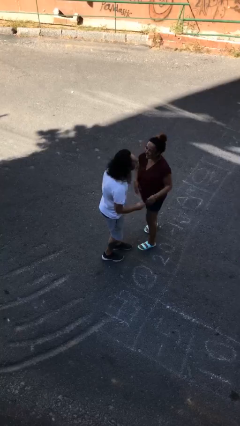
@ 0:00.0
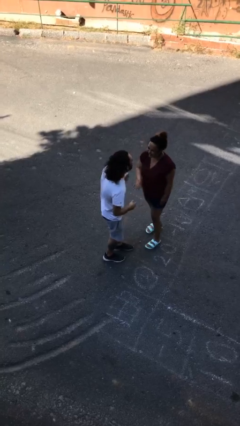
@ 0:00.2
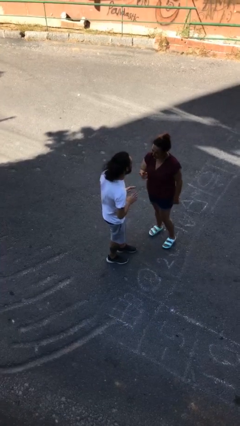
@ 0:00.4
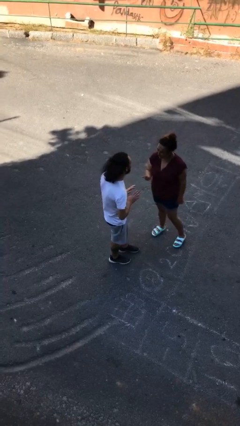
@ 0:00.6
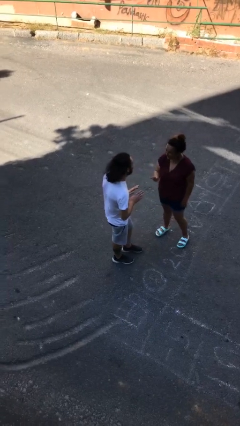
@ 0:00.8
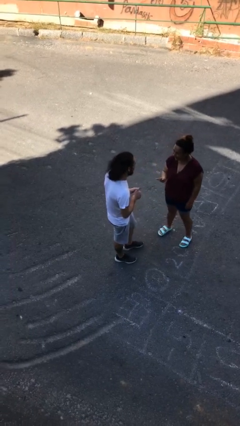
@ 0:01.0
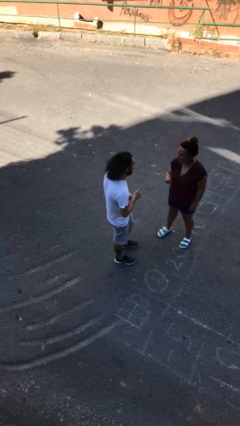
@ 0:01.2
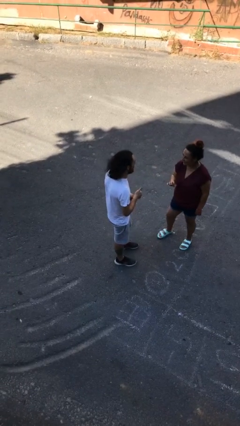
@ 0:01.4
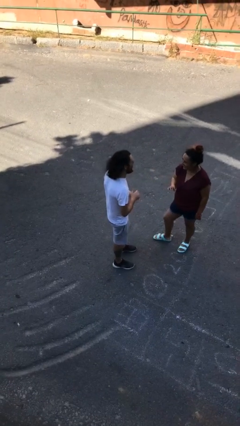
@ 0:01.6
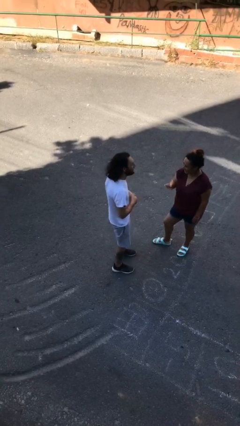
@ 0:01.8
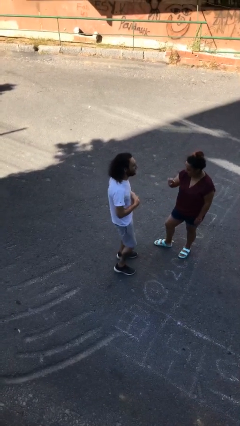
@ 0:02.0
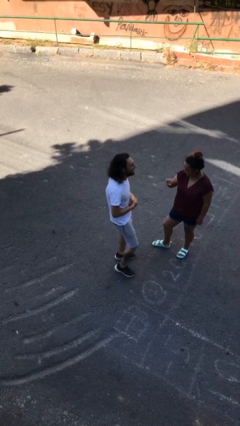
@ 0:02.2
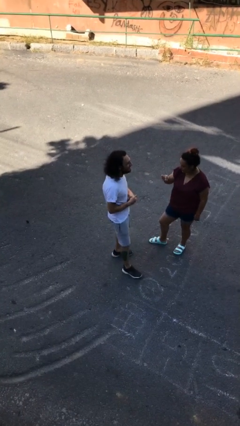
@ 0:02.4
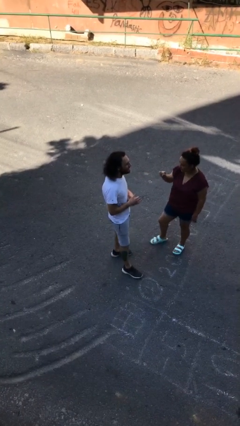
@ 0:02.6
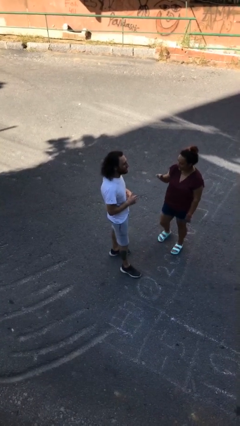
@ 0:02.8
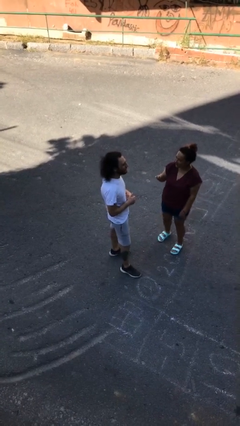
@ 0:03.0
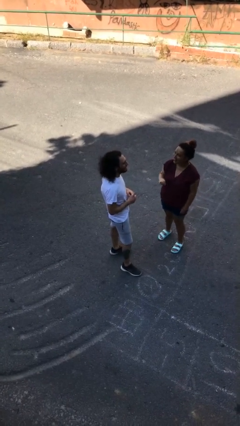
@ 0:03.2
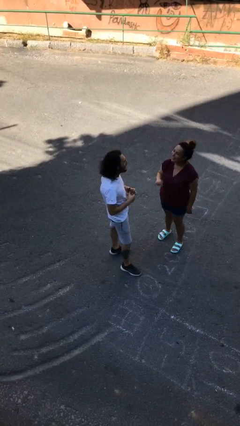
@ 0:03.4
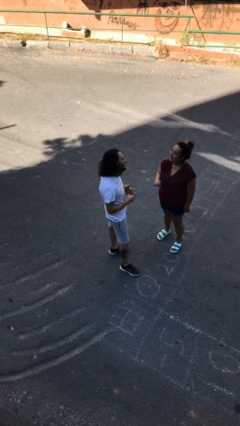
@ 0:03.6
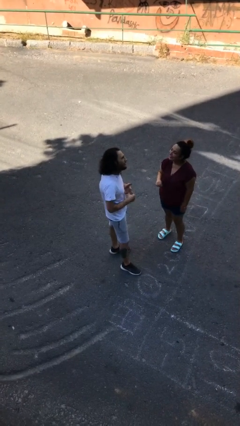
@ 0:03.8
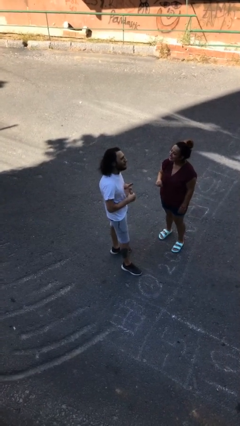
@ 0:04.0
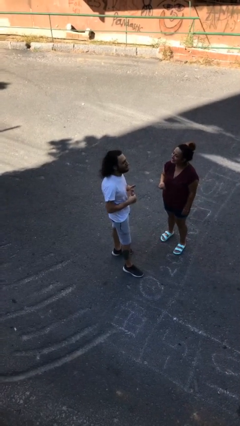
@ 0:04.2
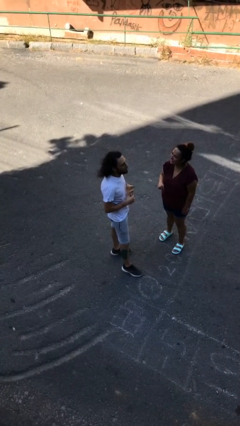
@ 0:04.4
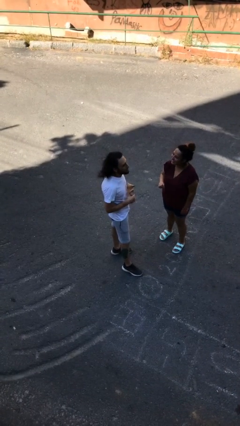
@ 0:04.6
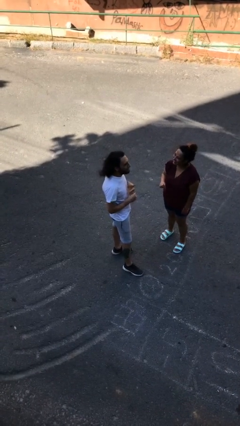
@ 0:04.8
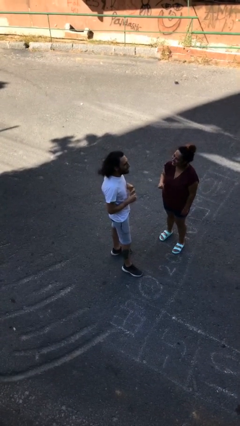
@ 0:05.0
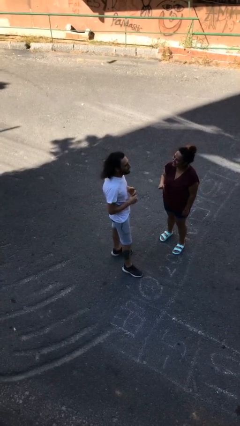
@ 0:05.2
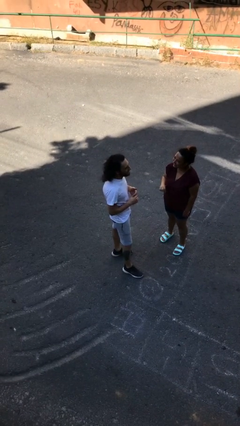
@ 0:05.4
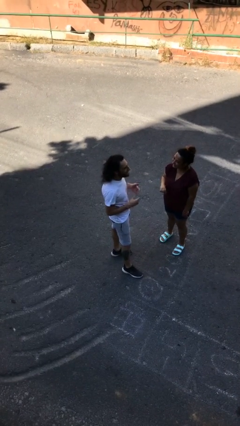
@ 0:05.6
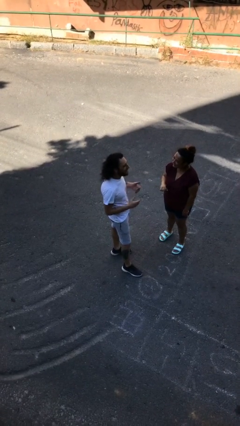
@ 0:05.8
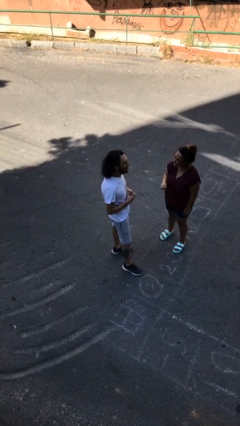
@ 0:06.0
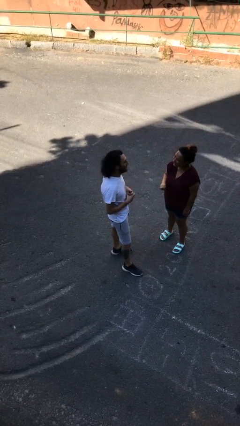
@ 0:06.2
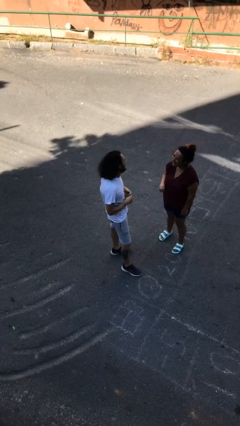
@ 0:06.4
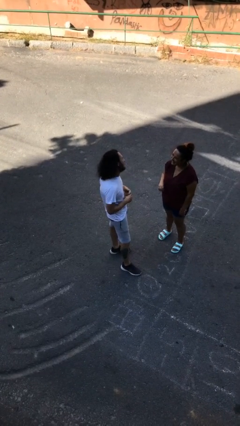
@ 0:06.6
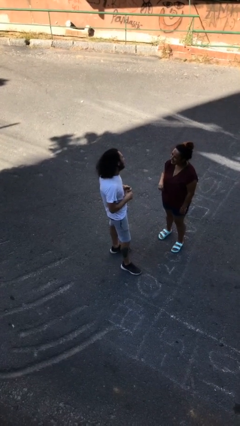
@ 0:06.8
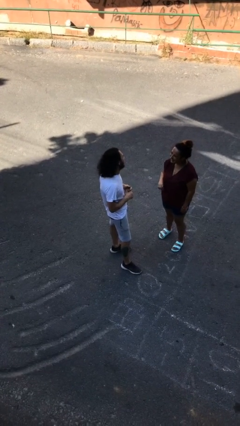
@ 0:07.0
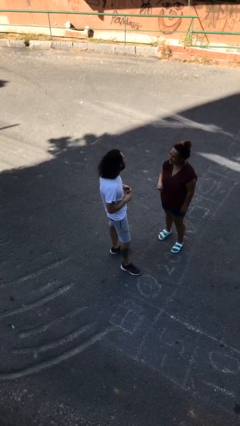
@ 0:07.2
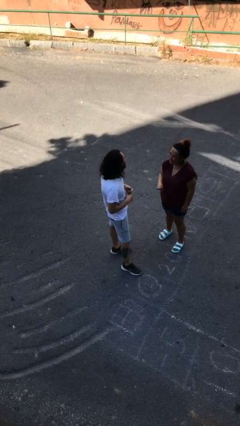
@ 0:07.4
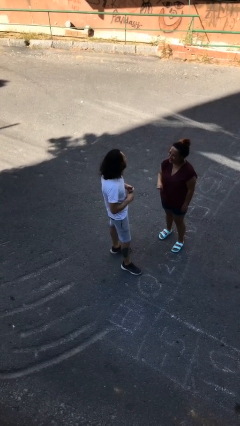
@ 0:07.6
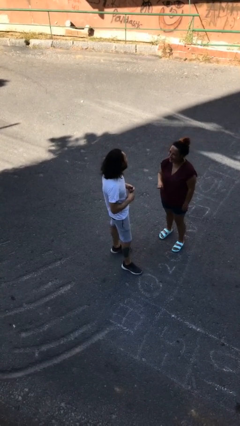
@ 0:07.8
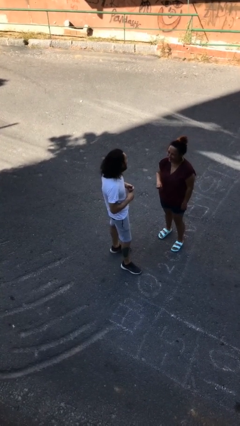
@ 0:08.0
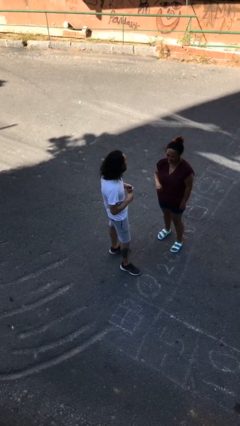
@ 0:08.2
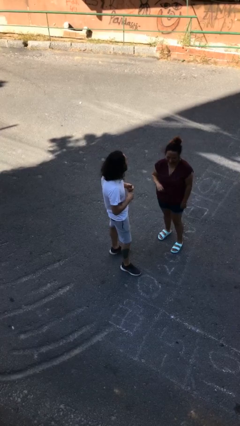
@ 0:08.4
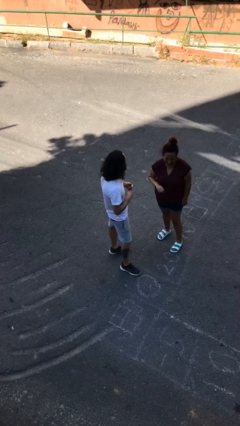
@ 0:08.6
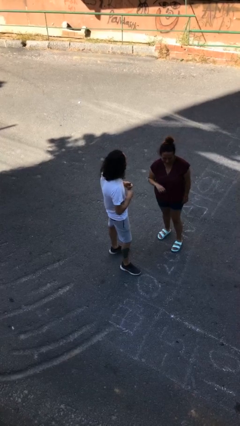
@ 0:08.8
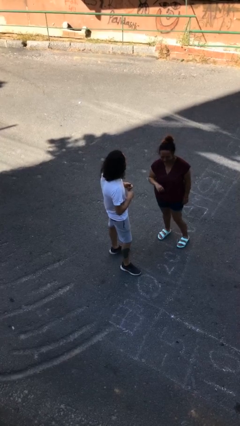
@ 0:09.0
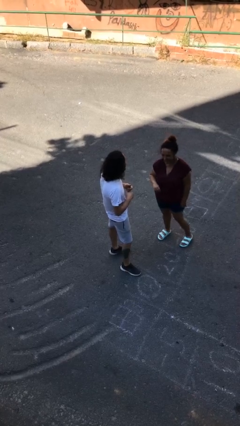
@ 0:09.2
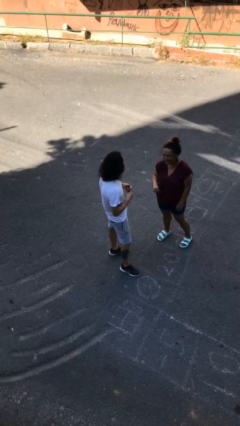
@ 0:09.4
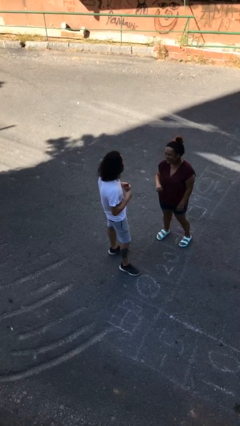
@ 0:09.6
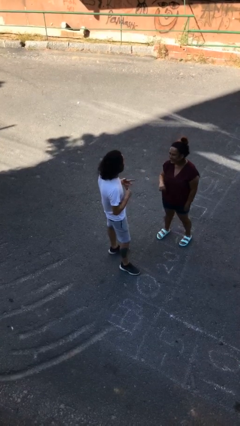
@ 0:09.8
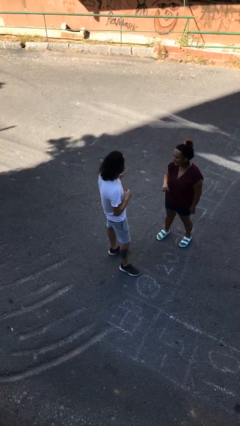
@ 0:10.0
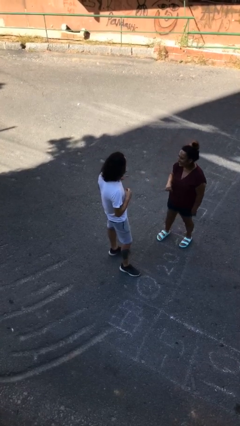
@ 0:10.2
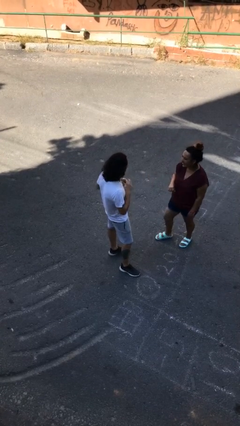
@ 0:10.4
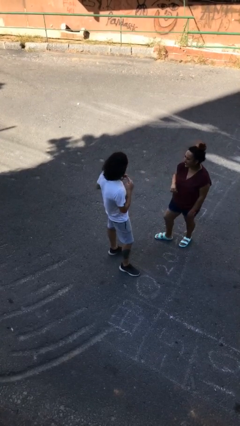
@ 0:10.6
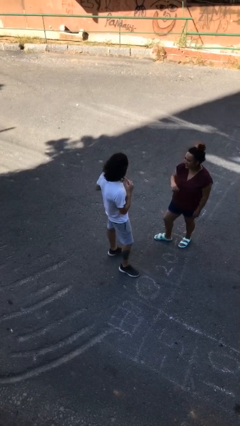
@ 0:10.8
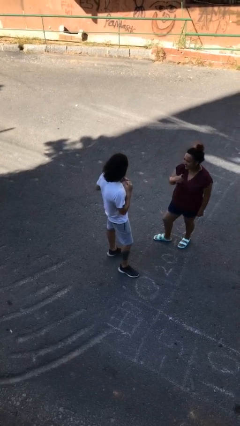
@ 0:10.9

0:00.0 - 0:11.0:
person talks to person

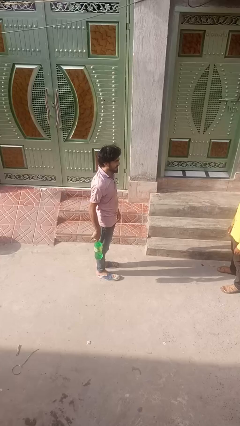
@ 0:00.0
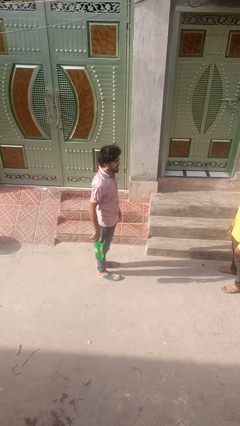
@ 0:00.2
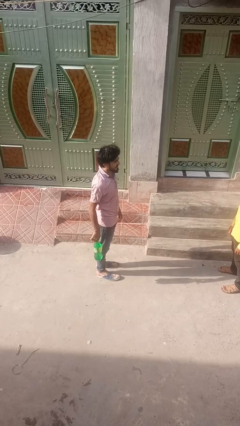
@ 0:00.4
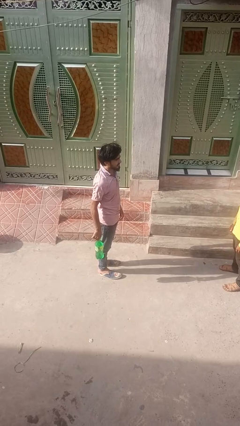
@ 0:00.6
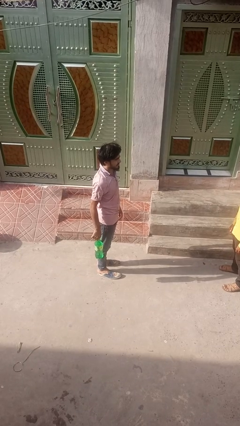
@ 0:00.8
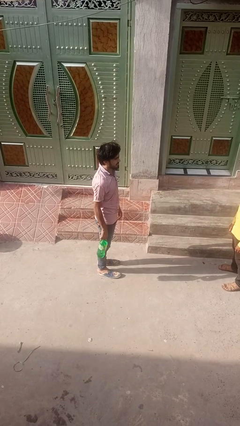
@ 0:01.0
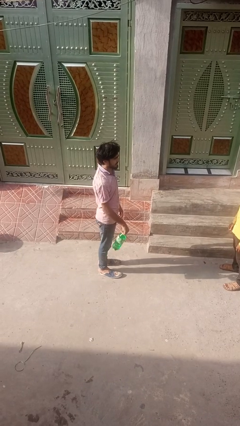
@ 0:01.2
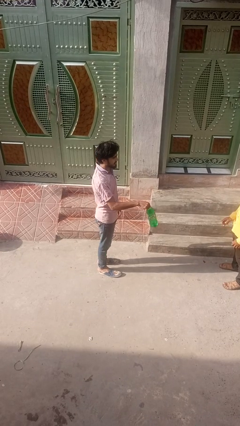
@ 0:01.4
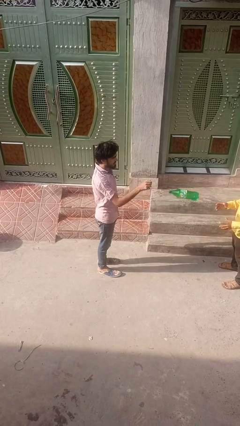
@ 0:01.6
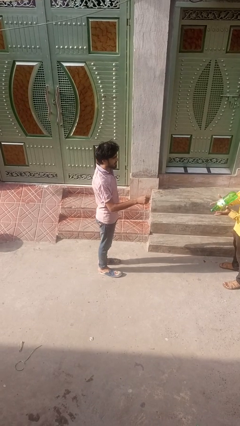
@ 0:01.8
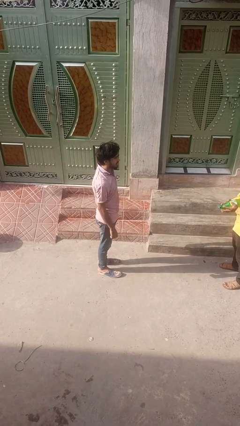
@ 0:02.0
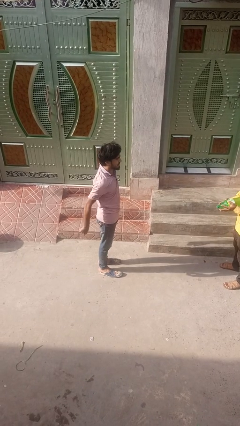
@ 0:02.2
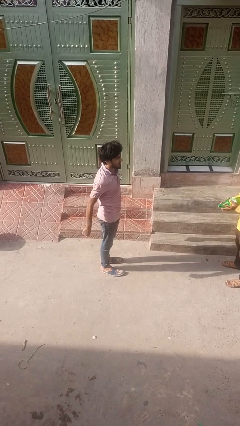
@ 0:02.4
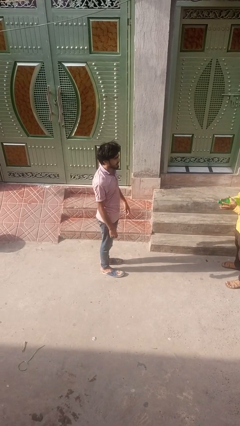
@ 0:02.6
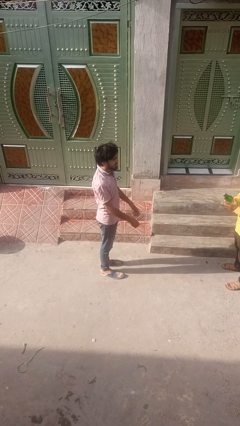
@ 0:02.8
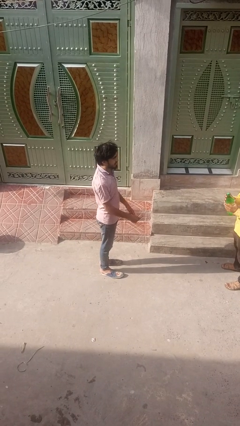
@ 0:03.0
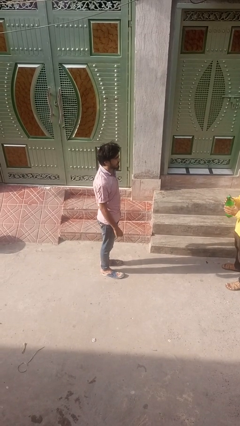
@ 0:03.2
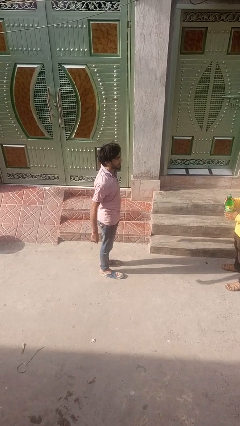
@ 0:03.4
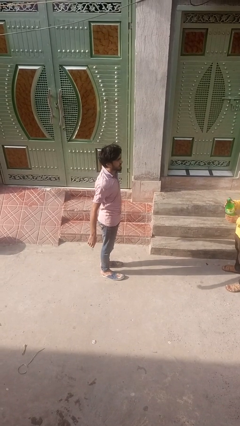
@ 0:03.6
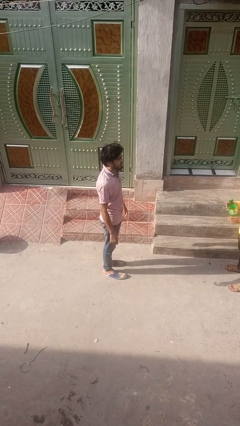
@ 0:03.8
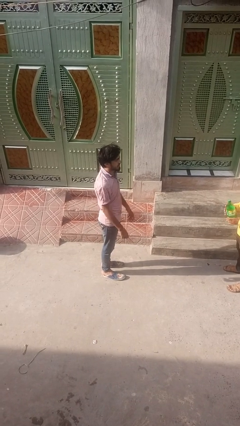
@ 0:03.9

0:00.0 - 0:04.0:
person throws object to person

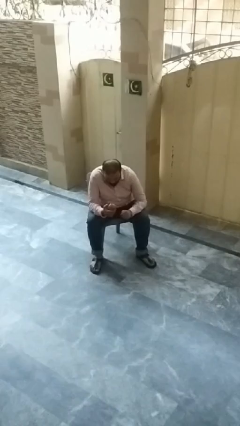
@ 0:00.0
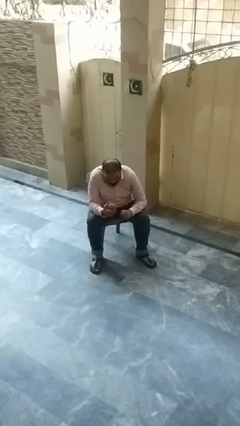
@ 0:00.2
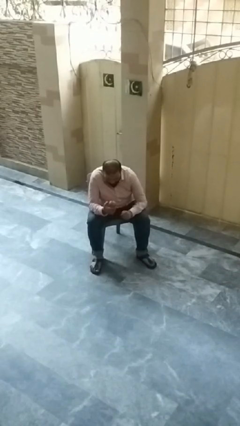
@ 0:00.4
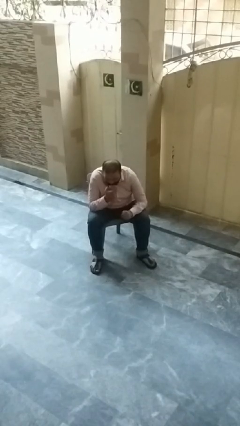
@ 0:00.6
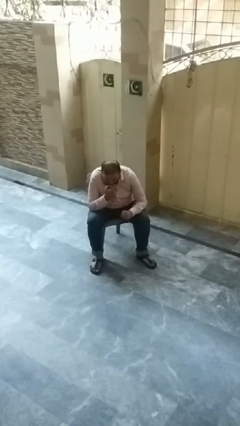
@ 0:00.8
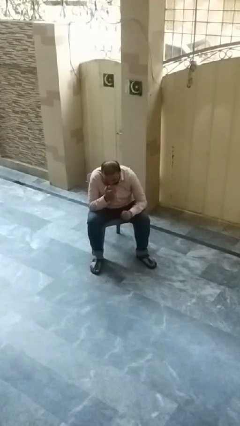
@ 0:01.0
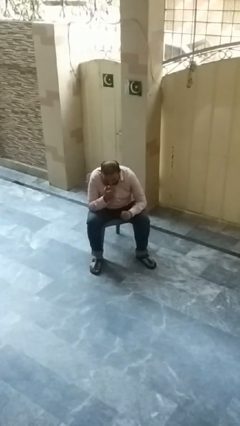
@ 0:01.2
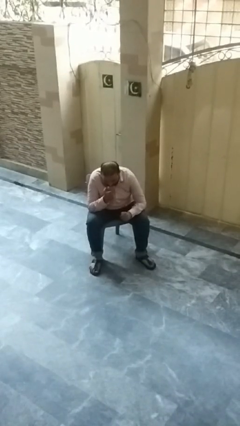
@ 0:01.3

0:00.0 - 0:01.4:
person eats apple

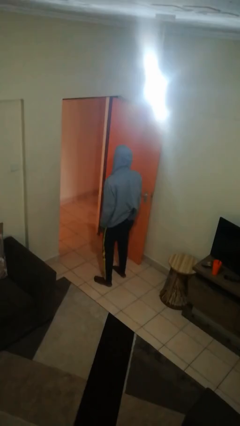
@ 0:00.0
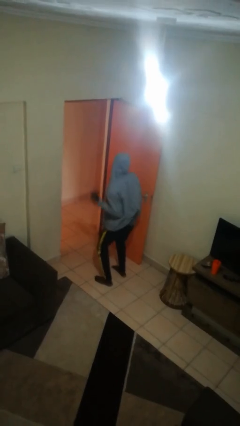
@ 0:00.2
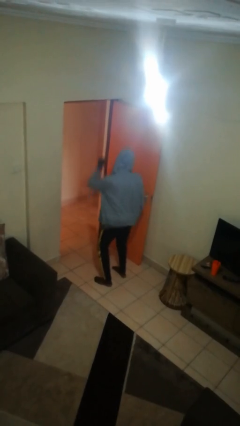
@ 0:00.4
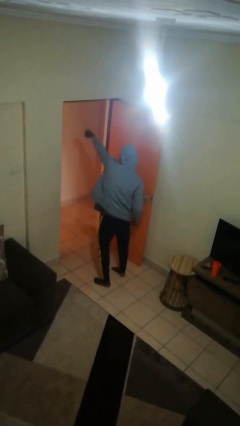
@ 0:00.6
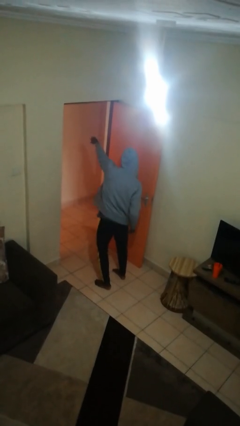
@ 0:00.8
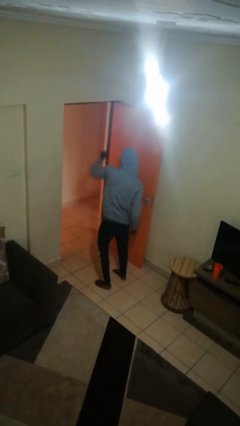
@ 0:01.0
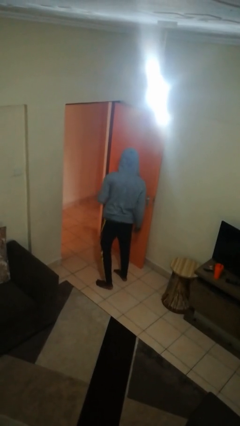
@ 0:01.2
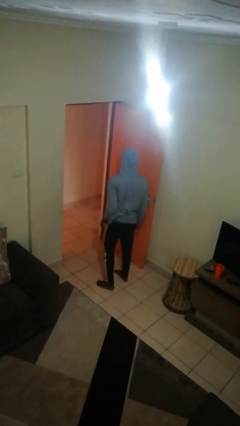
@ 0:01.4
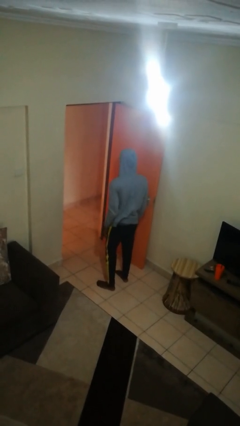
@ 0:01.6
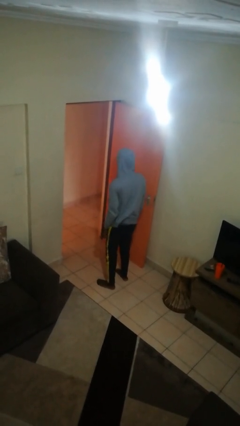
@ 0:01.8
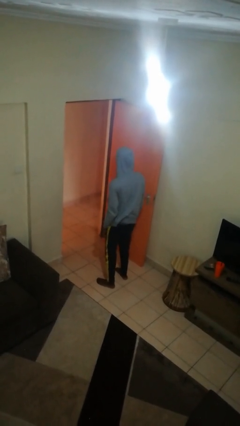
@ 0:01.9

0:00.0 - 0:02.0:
person punches
